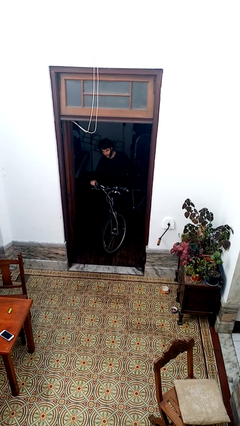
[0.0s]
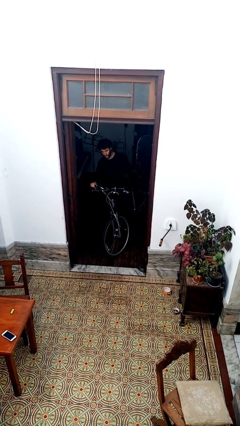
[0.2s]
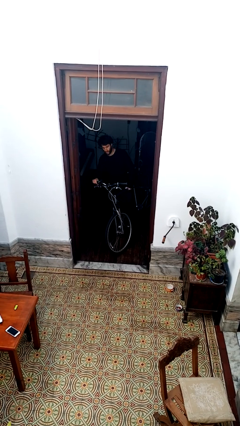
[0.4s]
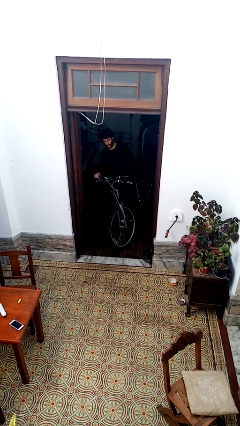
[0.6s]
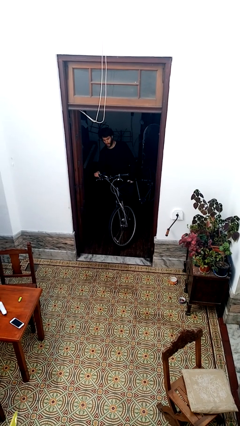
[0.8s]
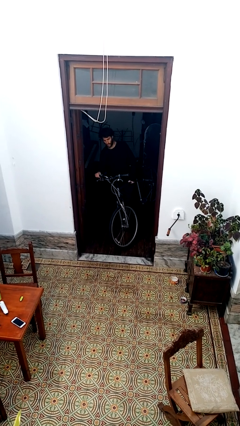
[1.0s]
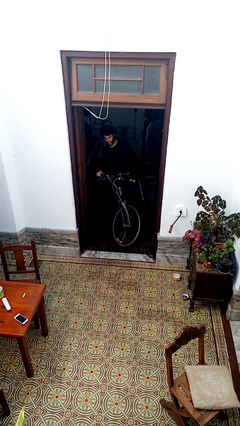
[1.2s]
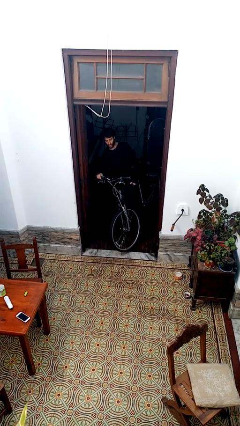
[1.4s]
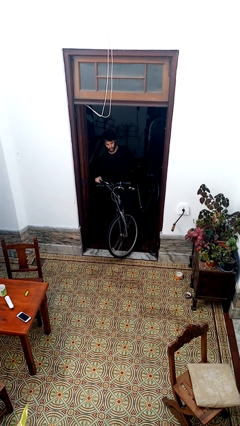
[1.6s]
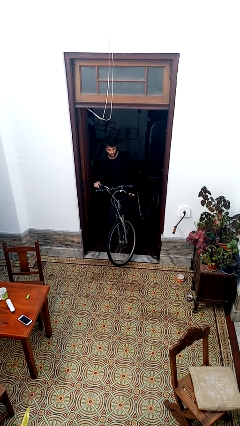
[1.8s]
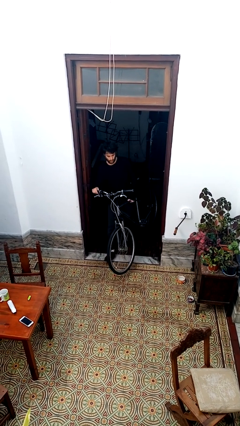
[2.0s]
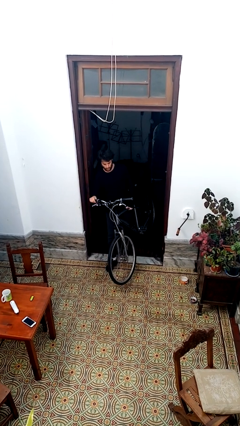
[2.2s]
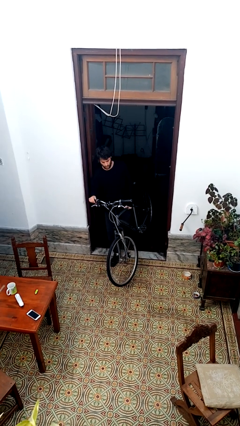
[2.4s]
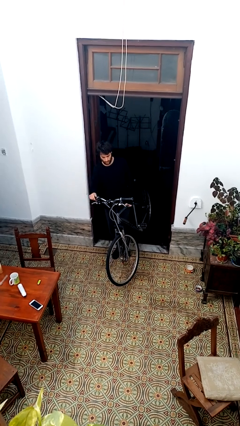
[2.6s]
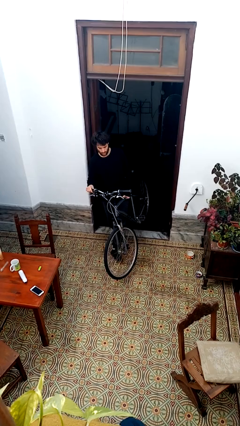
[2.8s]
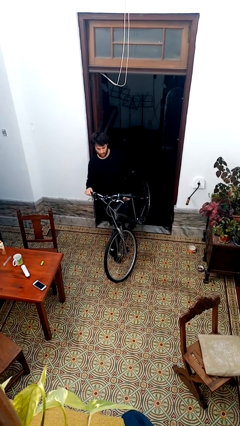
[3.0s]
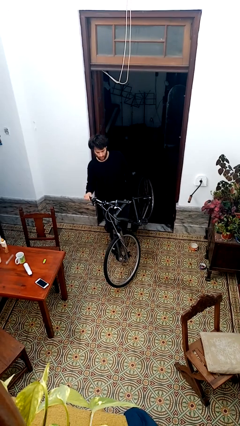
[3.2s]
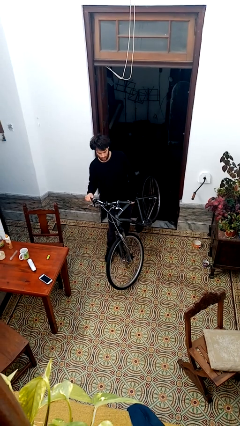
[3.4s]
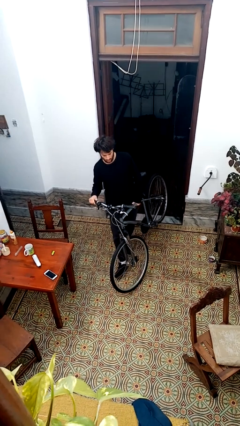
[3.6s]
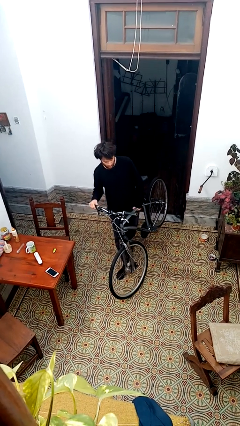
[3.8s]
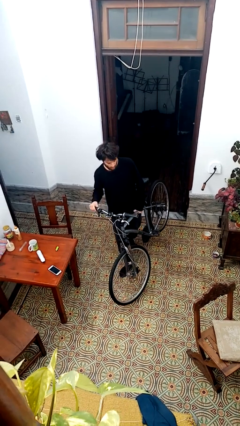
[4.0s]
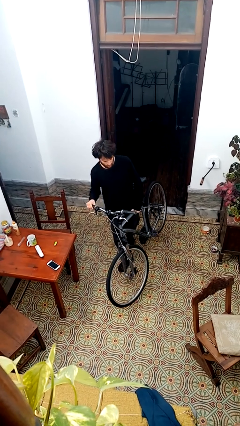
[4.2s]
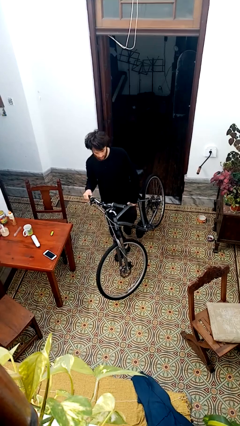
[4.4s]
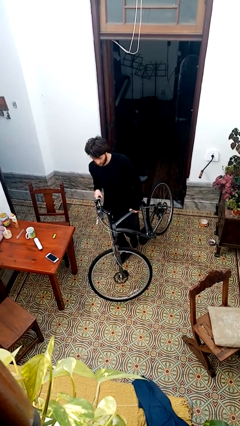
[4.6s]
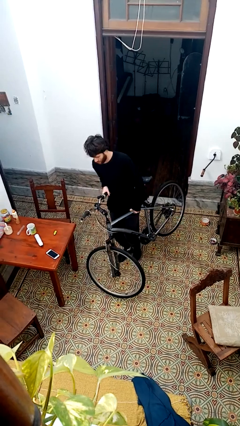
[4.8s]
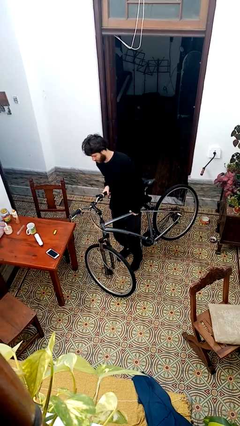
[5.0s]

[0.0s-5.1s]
person carries bicycle

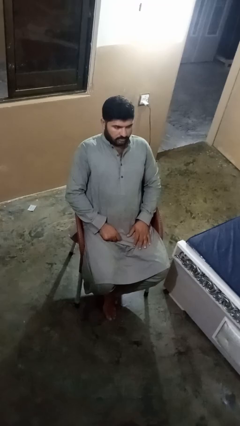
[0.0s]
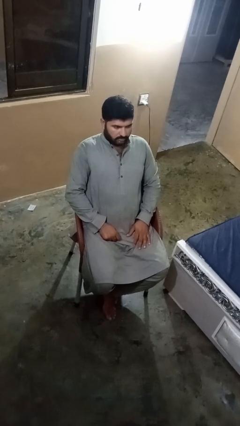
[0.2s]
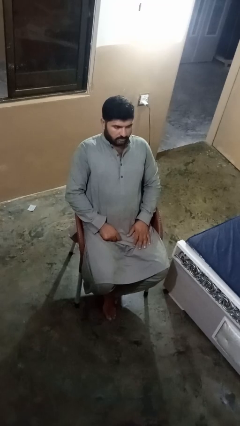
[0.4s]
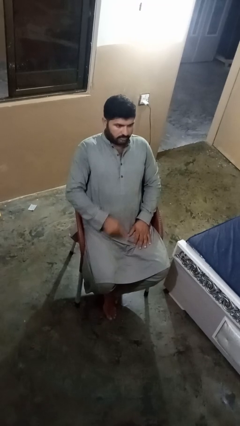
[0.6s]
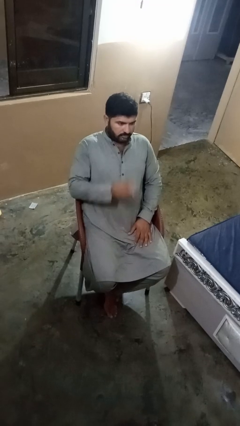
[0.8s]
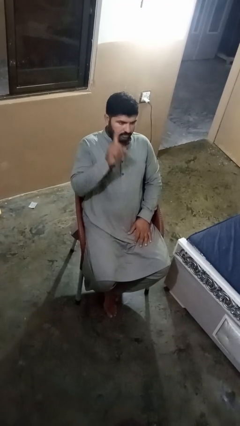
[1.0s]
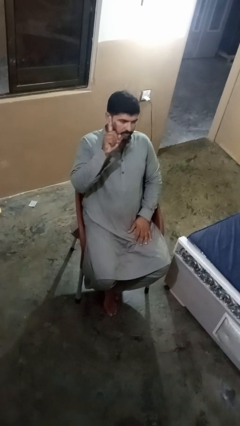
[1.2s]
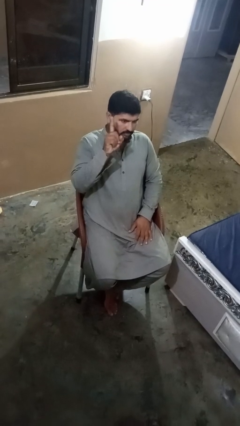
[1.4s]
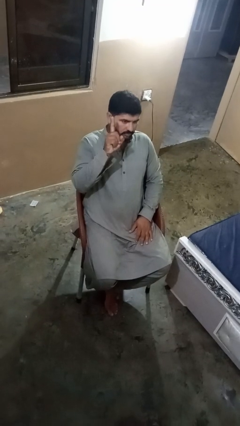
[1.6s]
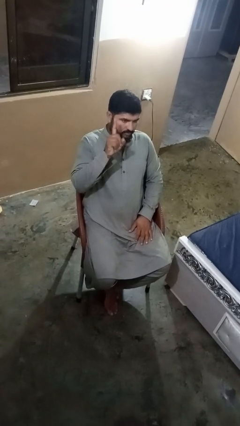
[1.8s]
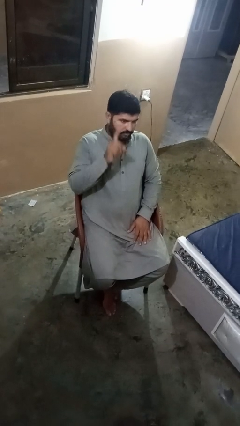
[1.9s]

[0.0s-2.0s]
person gestures number one

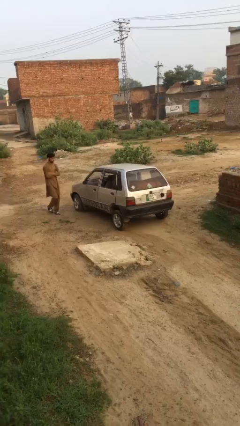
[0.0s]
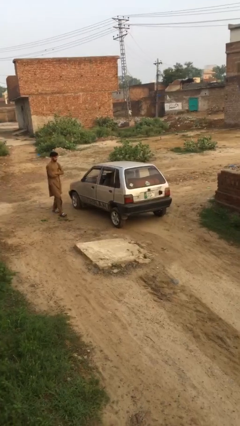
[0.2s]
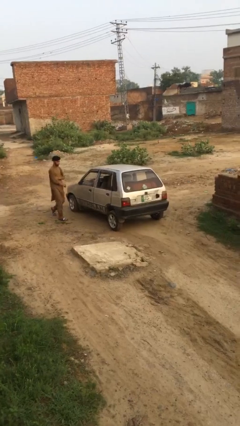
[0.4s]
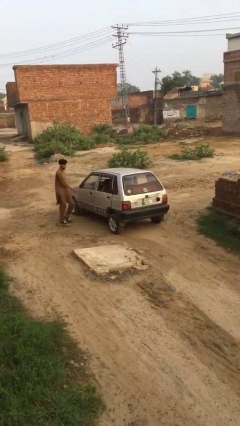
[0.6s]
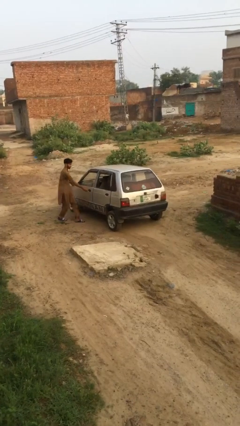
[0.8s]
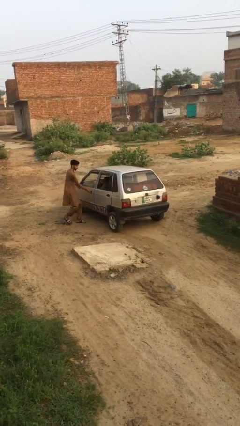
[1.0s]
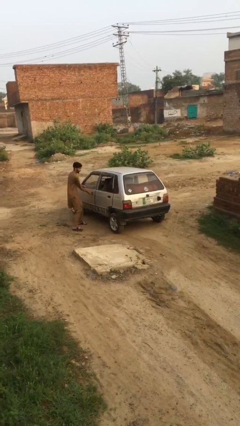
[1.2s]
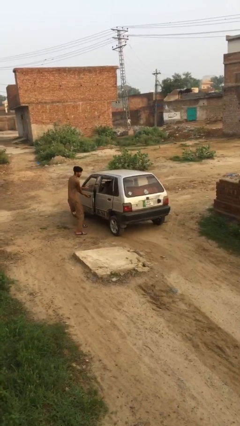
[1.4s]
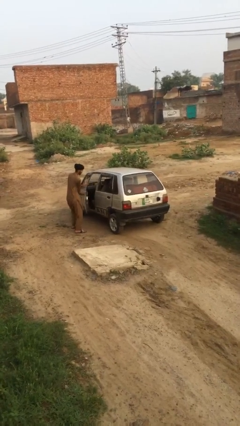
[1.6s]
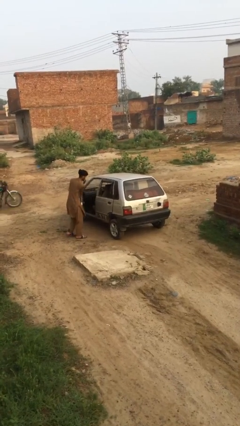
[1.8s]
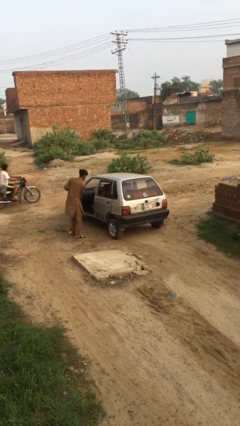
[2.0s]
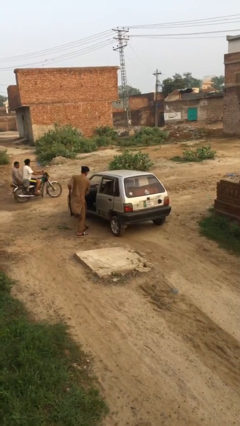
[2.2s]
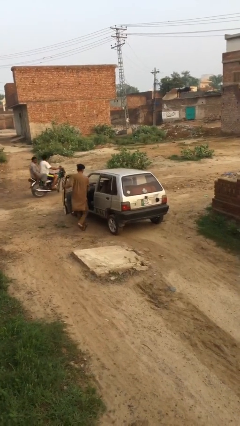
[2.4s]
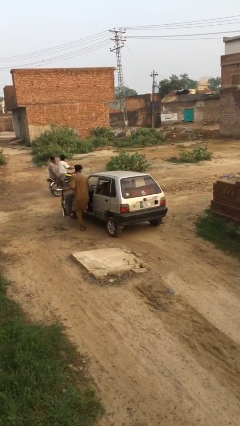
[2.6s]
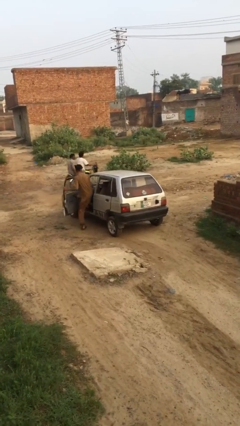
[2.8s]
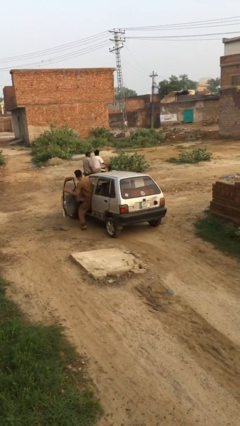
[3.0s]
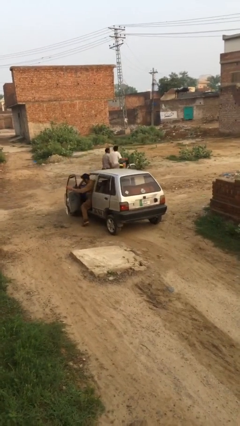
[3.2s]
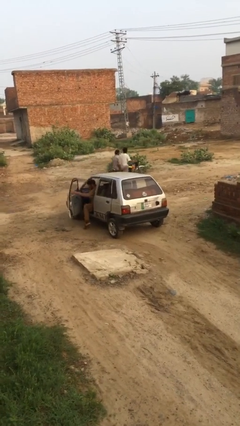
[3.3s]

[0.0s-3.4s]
car picks up person

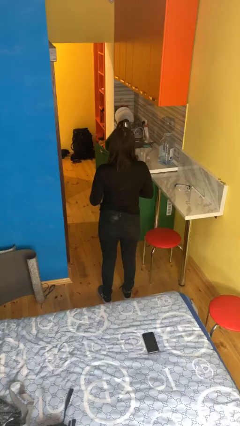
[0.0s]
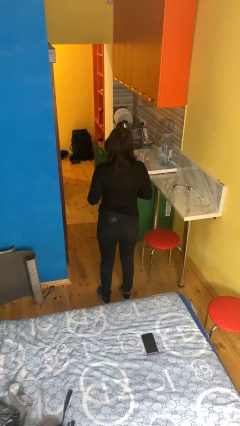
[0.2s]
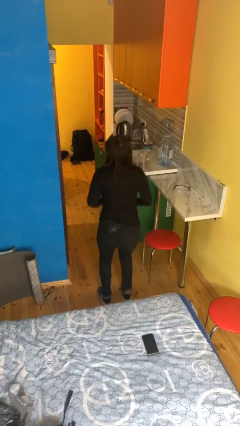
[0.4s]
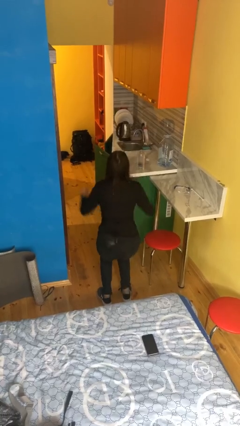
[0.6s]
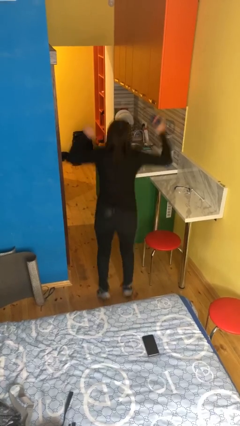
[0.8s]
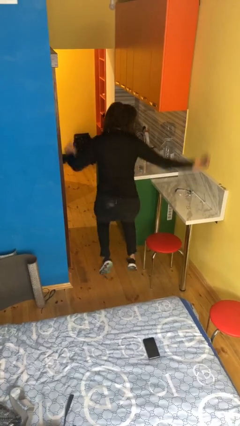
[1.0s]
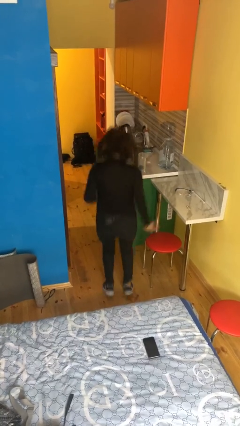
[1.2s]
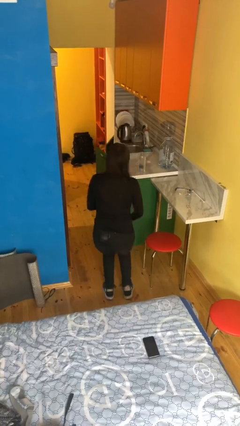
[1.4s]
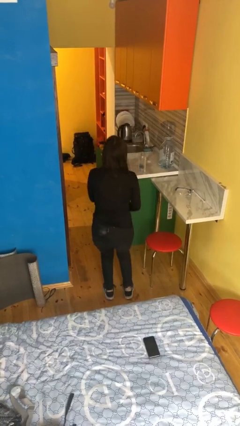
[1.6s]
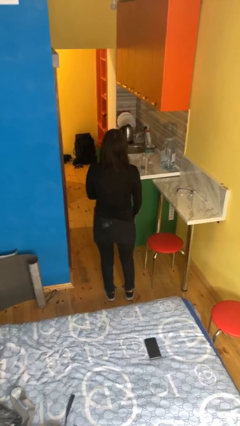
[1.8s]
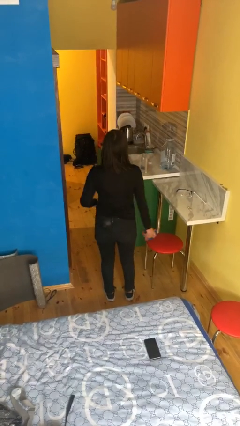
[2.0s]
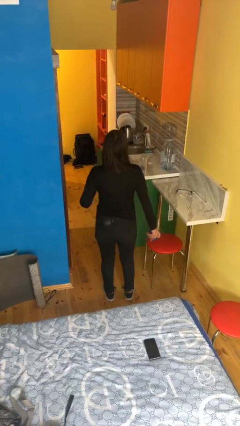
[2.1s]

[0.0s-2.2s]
person jumps

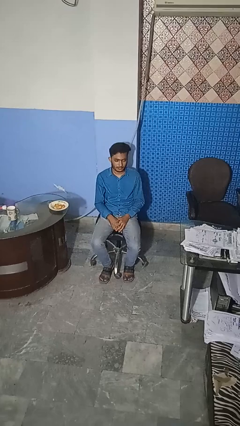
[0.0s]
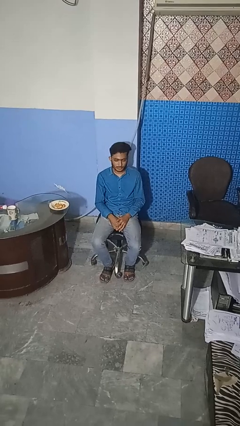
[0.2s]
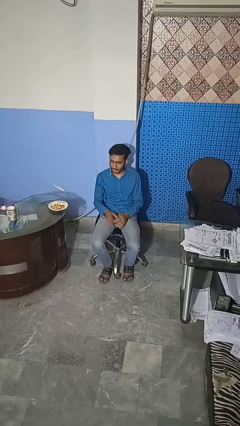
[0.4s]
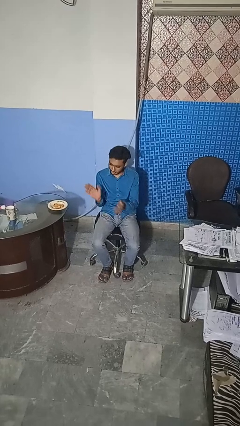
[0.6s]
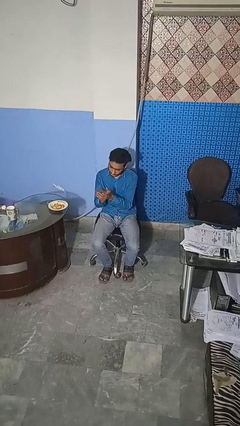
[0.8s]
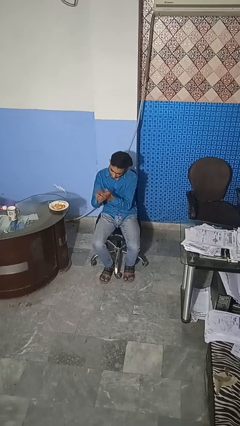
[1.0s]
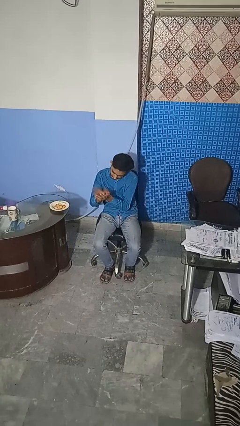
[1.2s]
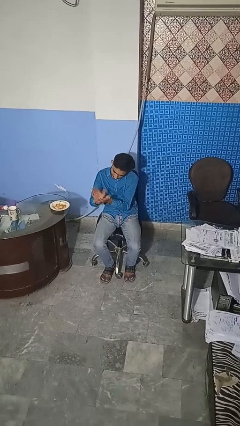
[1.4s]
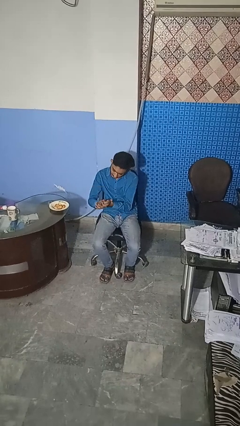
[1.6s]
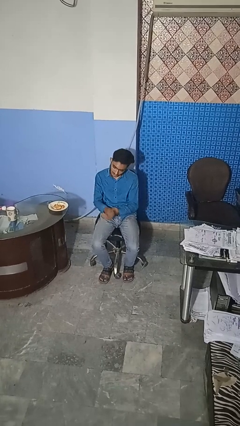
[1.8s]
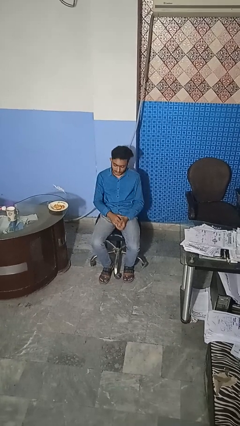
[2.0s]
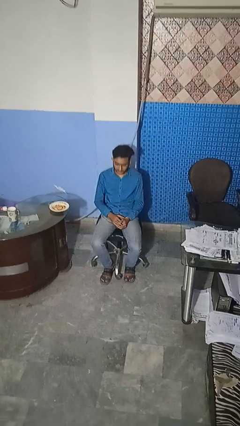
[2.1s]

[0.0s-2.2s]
person claps hands

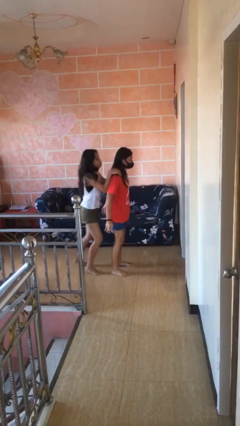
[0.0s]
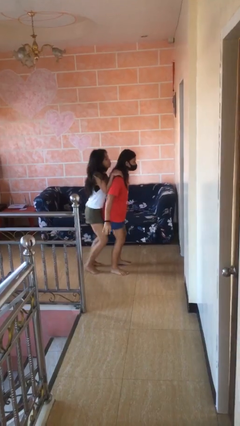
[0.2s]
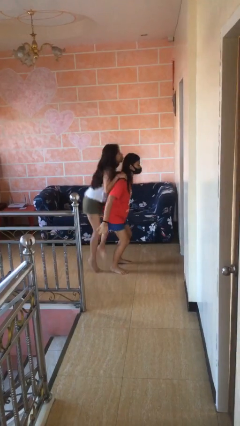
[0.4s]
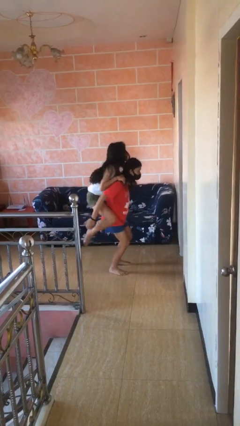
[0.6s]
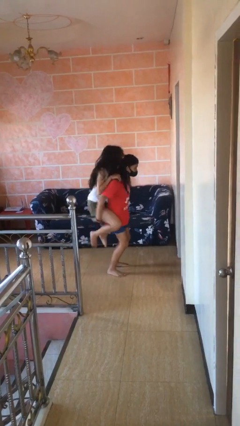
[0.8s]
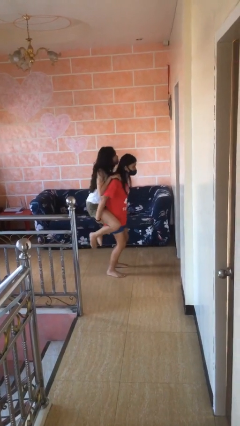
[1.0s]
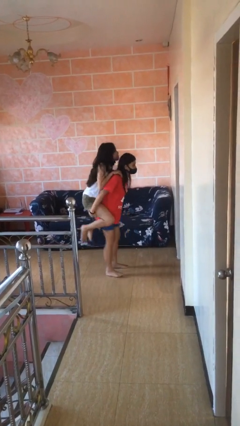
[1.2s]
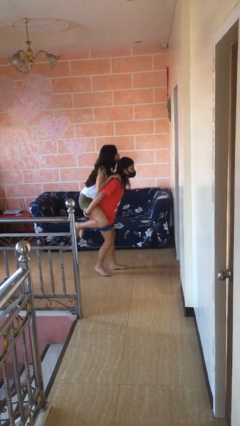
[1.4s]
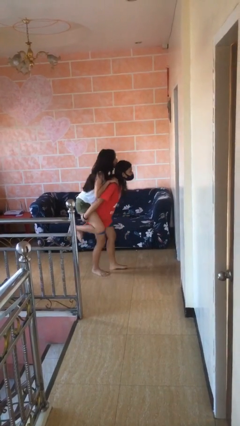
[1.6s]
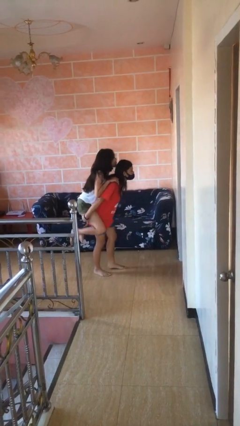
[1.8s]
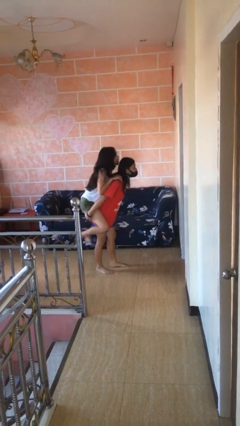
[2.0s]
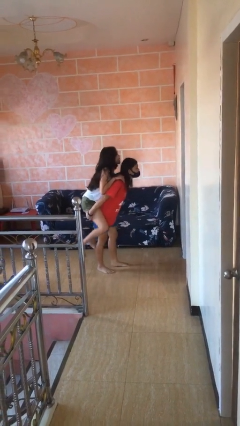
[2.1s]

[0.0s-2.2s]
person carries person over shoulder

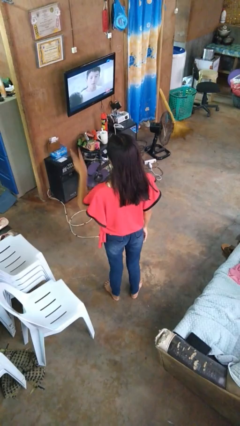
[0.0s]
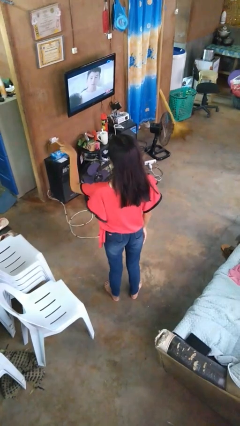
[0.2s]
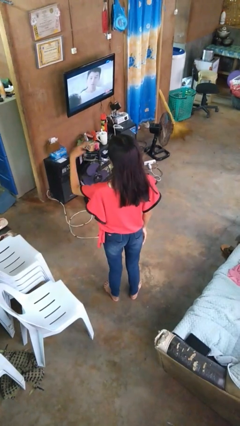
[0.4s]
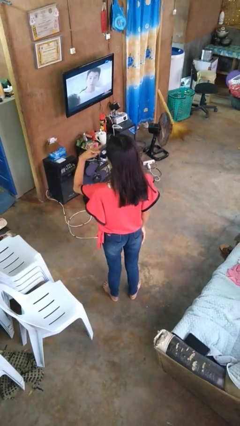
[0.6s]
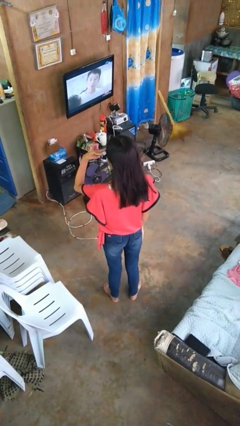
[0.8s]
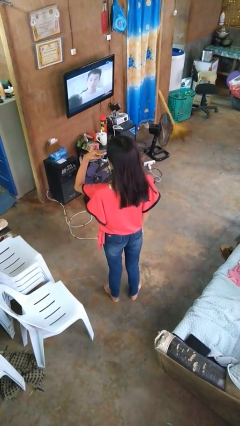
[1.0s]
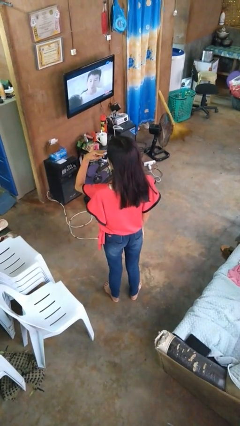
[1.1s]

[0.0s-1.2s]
person gestures watch closely
